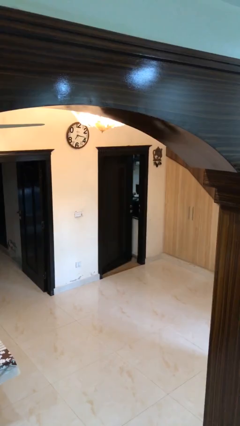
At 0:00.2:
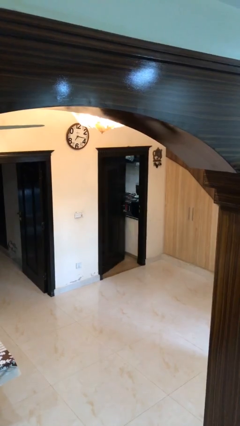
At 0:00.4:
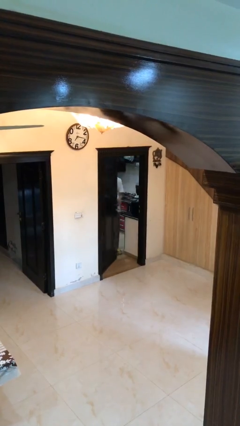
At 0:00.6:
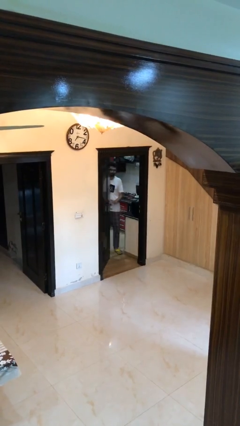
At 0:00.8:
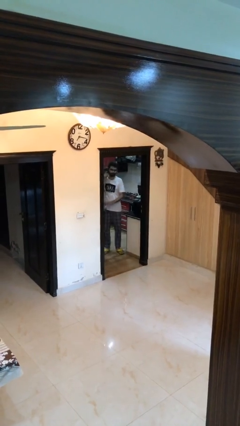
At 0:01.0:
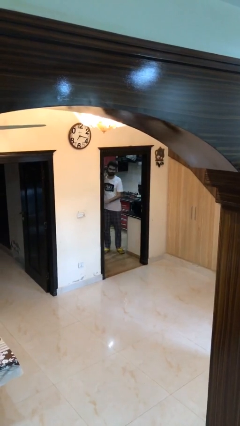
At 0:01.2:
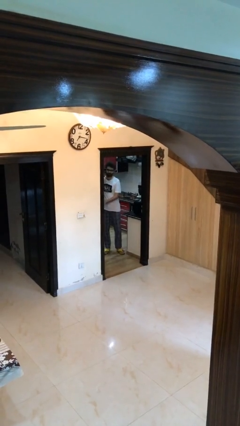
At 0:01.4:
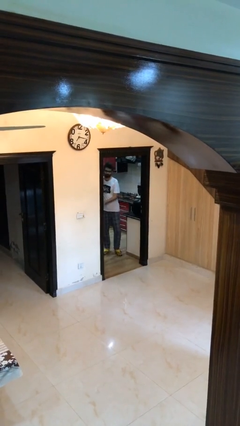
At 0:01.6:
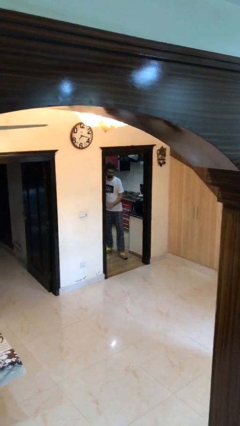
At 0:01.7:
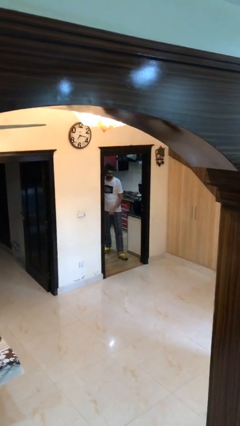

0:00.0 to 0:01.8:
person opens facility door

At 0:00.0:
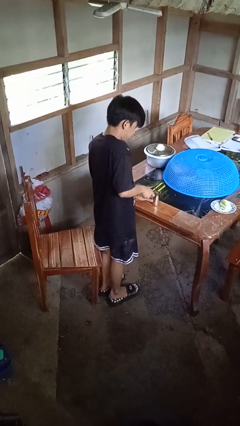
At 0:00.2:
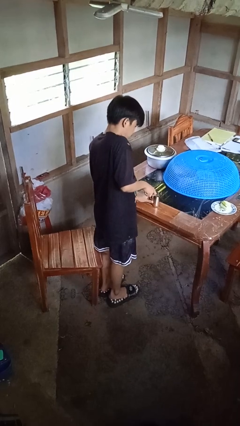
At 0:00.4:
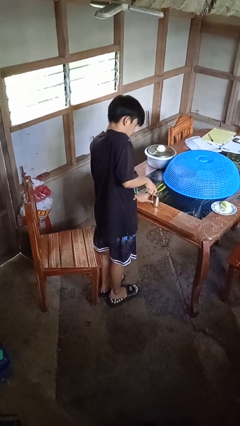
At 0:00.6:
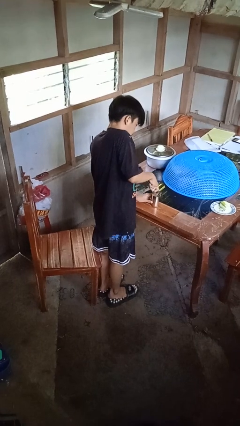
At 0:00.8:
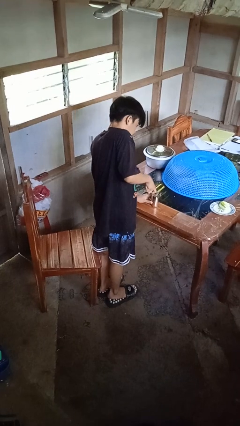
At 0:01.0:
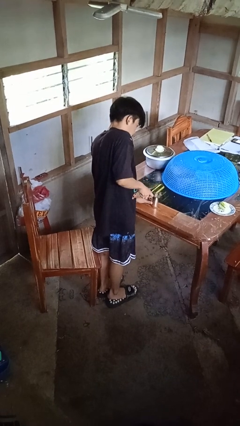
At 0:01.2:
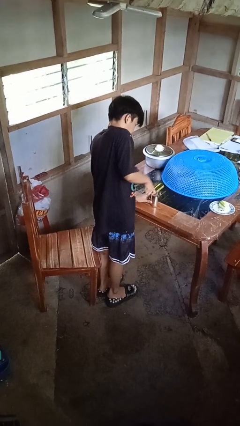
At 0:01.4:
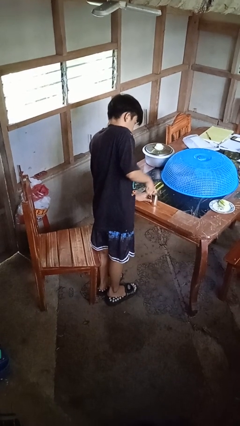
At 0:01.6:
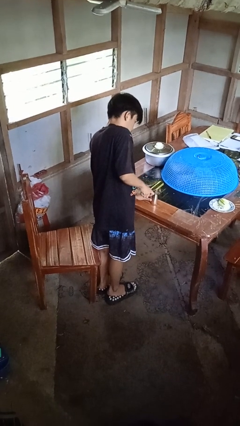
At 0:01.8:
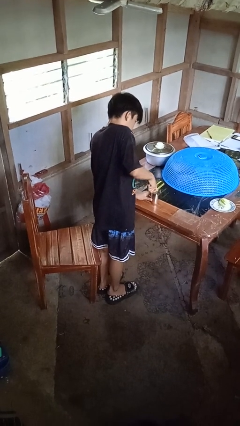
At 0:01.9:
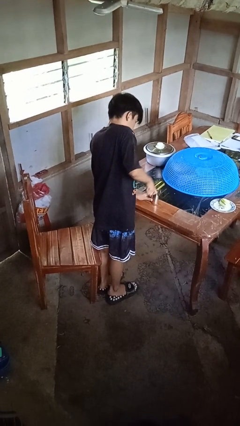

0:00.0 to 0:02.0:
person opens can with can opener

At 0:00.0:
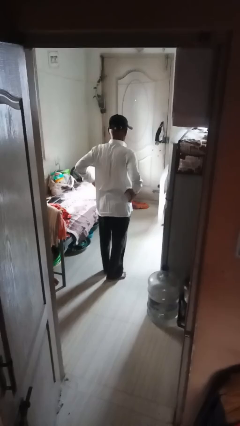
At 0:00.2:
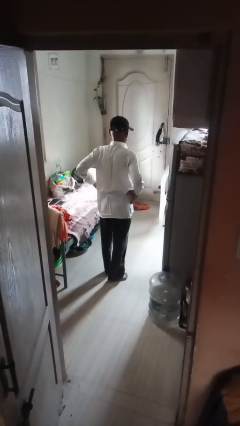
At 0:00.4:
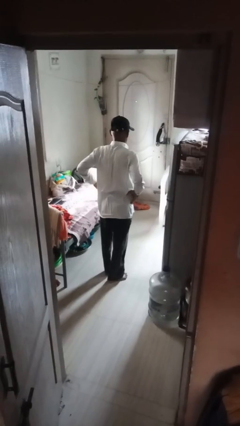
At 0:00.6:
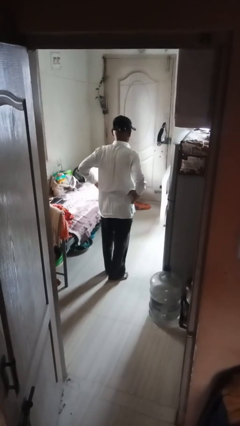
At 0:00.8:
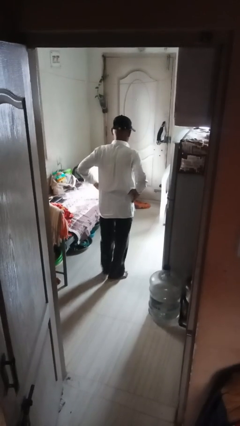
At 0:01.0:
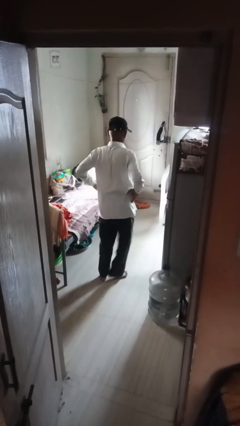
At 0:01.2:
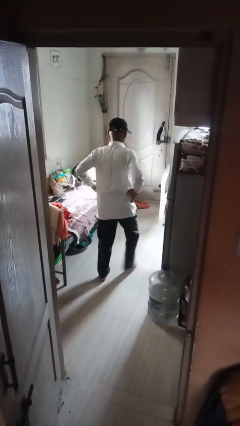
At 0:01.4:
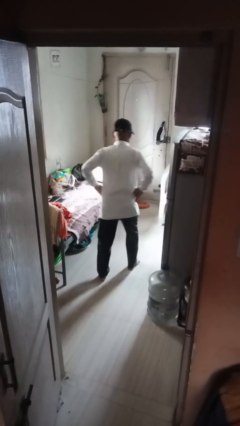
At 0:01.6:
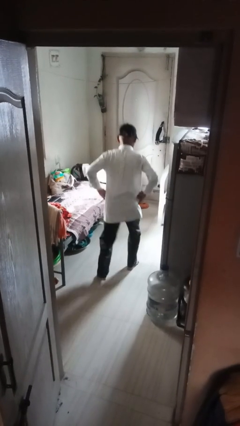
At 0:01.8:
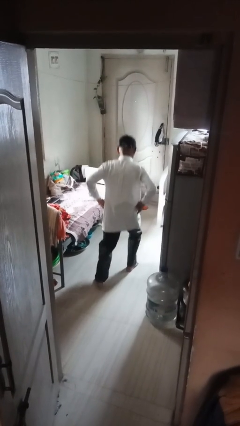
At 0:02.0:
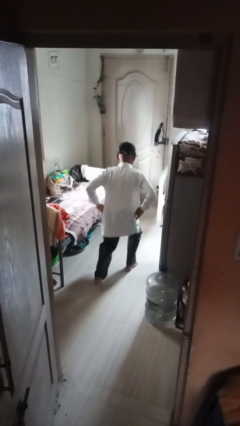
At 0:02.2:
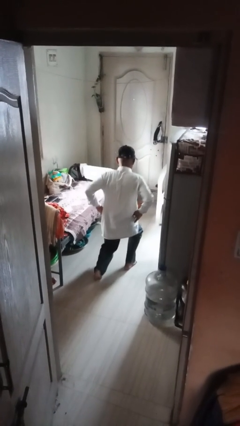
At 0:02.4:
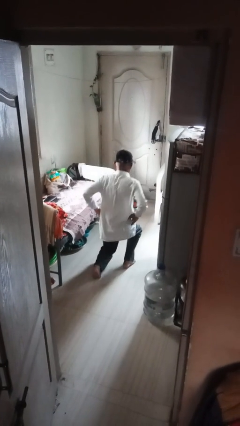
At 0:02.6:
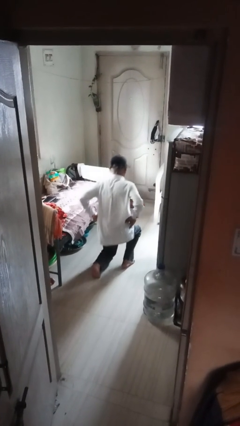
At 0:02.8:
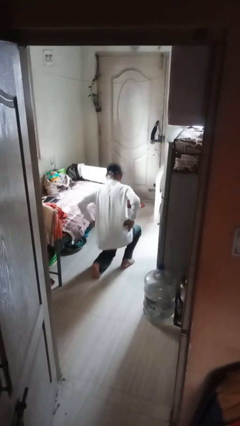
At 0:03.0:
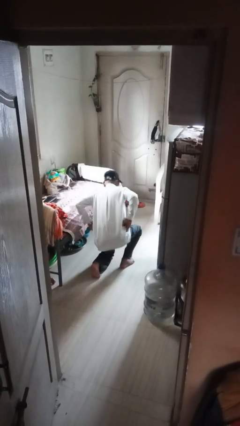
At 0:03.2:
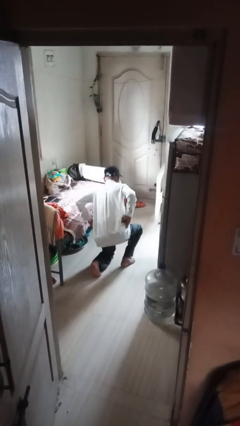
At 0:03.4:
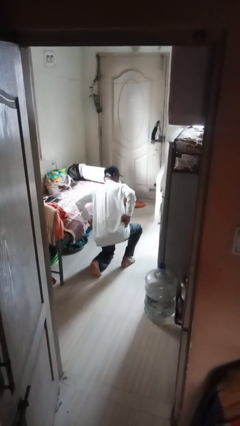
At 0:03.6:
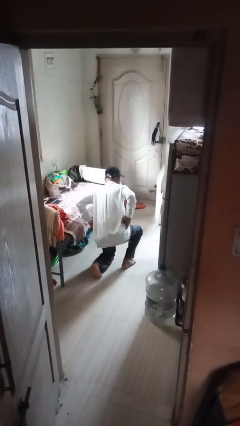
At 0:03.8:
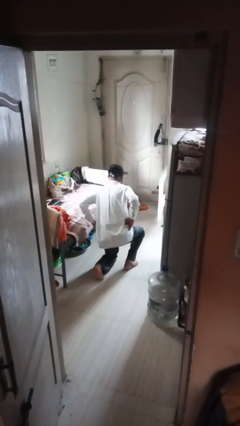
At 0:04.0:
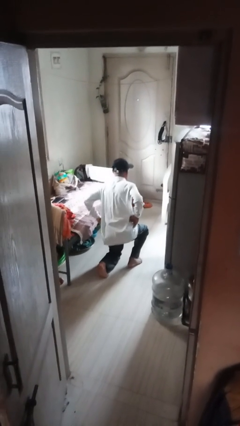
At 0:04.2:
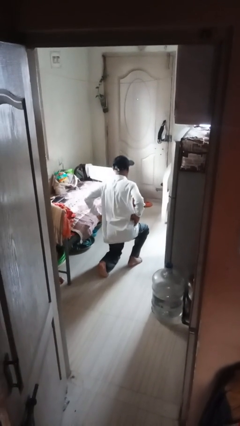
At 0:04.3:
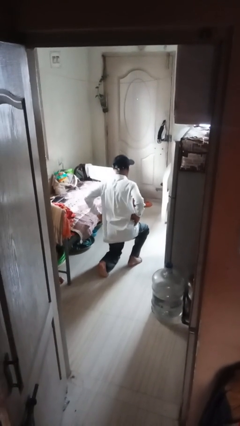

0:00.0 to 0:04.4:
person exercises with lunges

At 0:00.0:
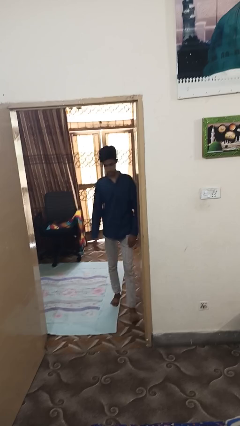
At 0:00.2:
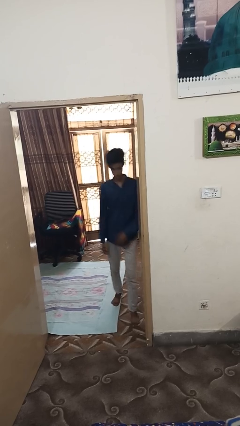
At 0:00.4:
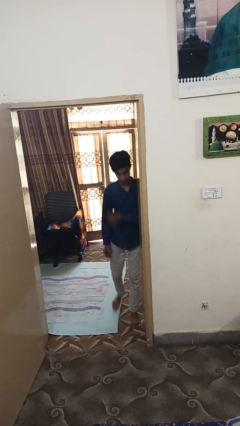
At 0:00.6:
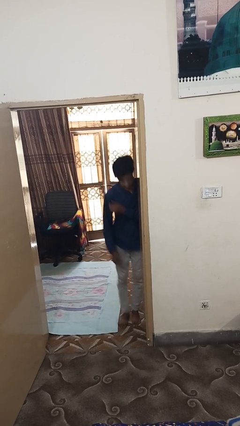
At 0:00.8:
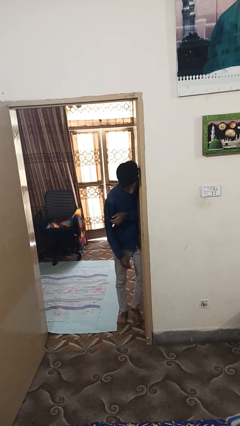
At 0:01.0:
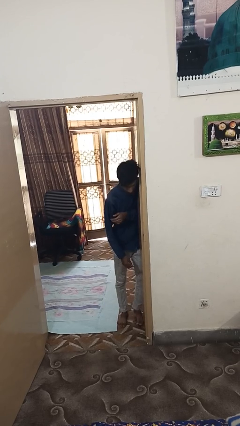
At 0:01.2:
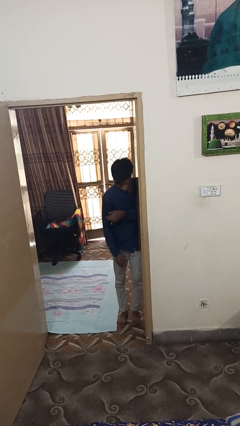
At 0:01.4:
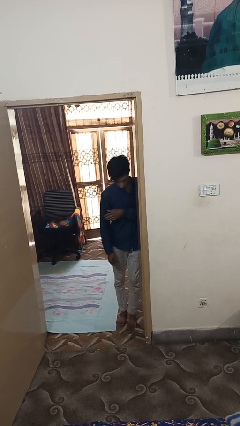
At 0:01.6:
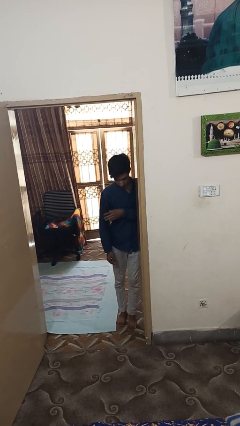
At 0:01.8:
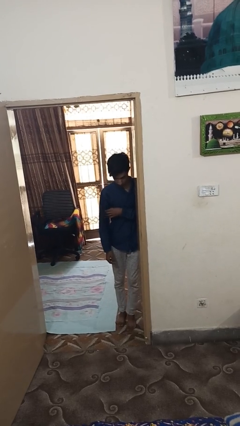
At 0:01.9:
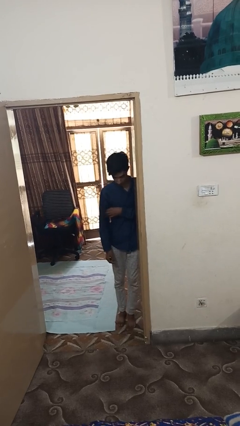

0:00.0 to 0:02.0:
person bumps into wall

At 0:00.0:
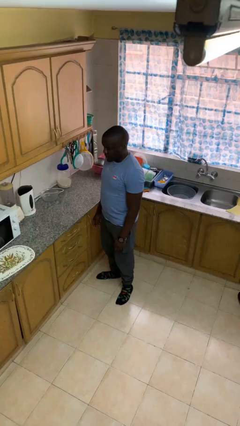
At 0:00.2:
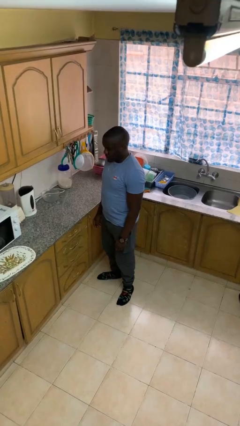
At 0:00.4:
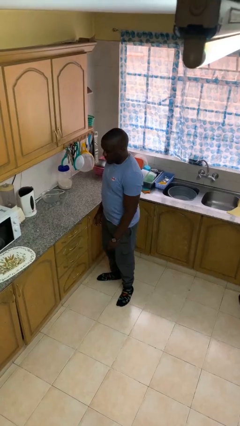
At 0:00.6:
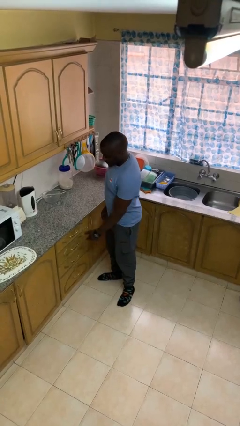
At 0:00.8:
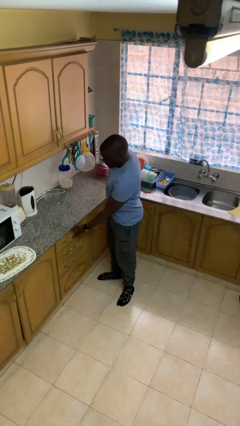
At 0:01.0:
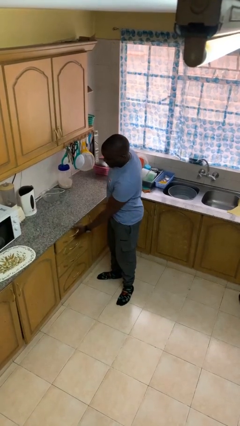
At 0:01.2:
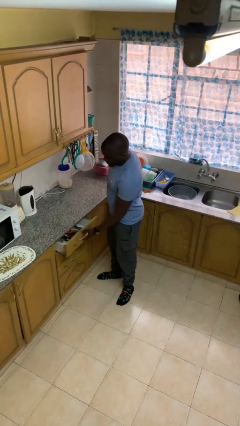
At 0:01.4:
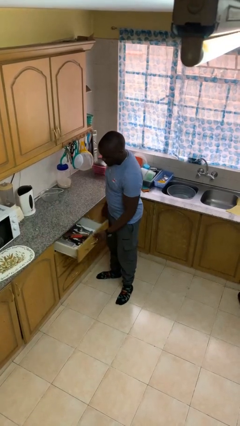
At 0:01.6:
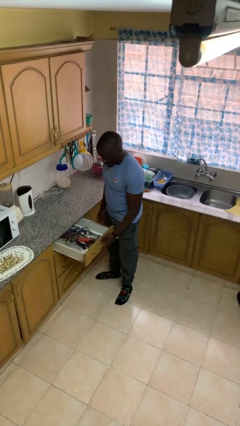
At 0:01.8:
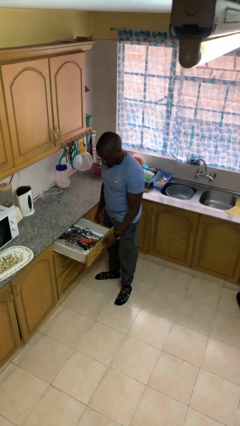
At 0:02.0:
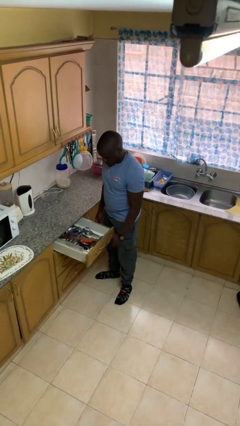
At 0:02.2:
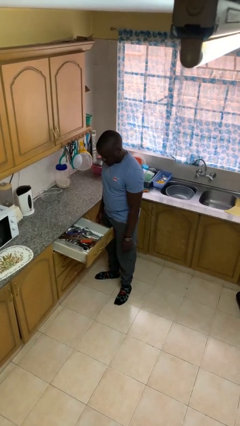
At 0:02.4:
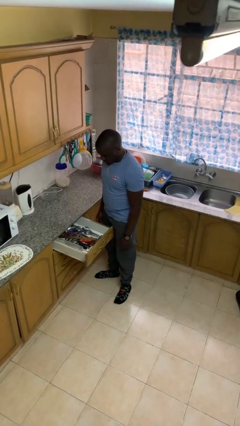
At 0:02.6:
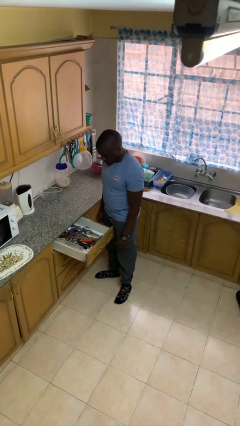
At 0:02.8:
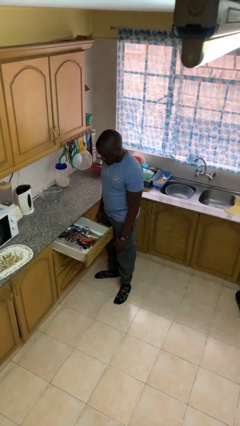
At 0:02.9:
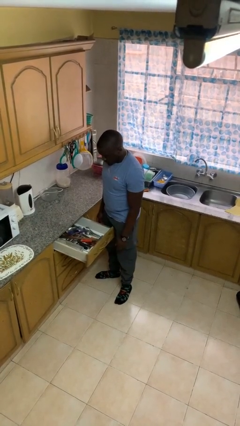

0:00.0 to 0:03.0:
person opens kitchen drawer

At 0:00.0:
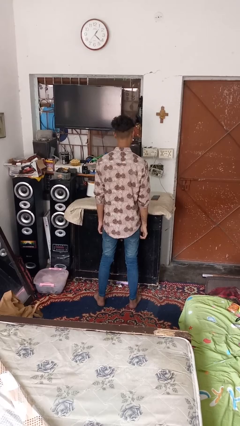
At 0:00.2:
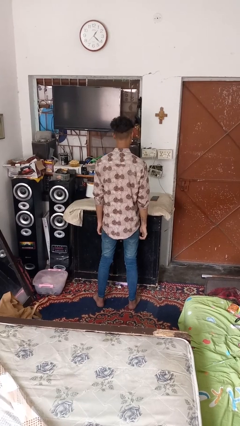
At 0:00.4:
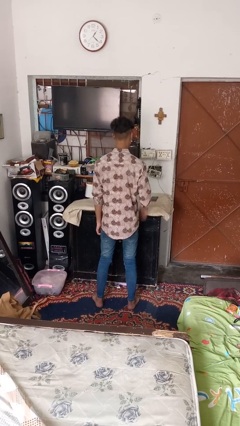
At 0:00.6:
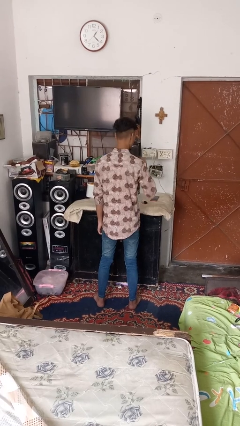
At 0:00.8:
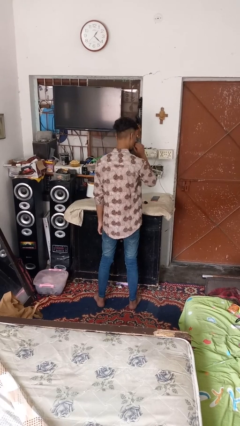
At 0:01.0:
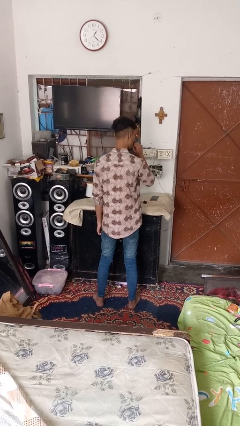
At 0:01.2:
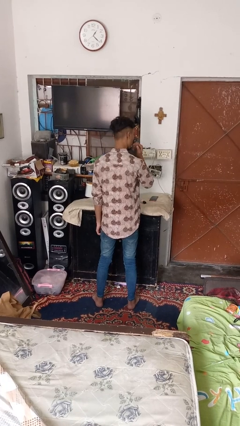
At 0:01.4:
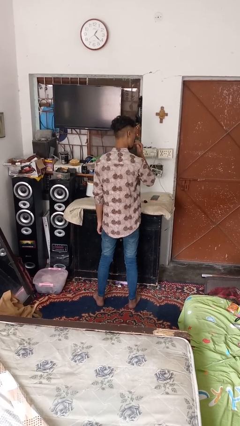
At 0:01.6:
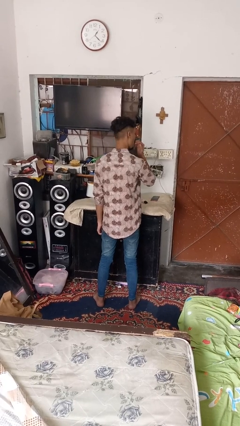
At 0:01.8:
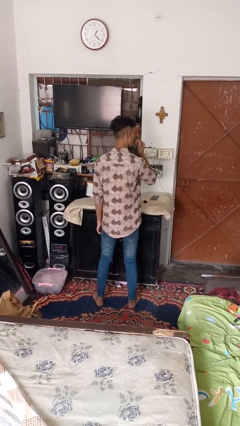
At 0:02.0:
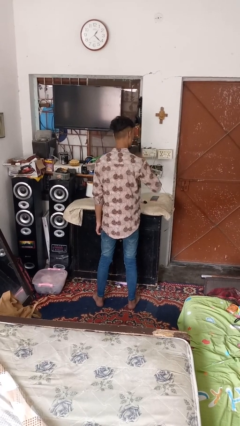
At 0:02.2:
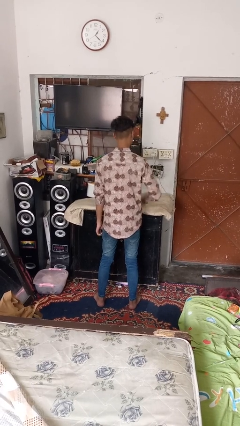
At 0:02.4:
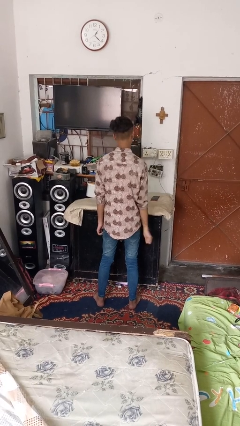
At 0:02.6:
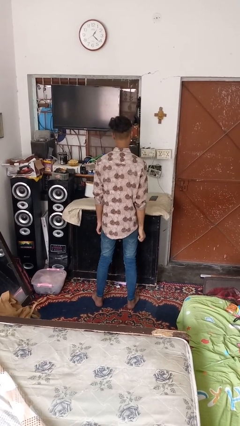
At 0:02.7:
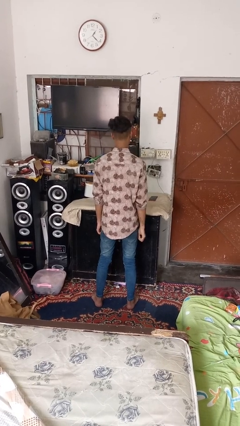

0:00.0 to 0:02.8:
person licks fingers

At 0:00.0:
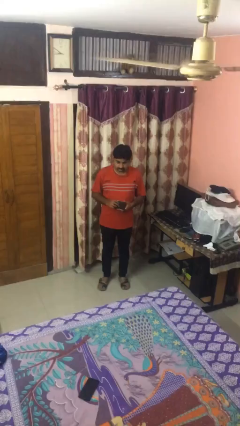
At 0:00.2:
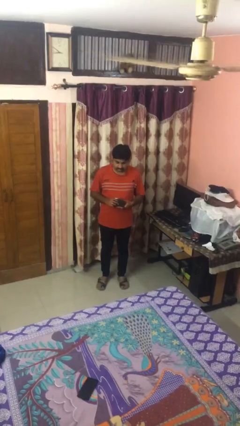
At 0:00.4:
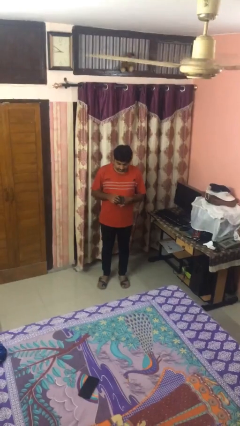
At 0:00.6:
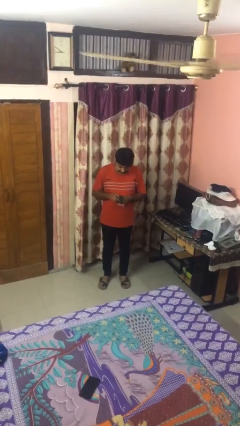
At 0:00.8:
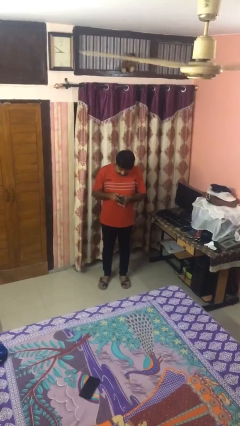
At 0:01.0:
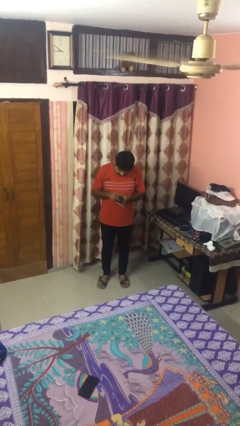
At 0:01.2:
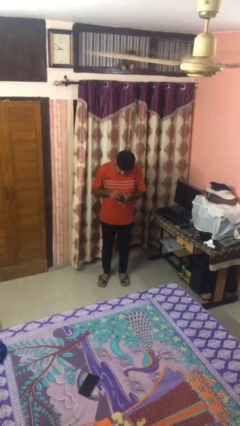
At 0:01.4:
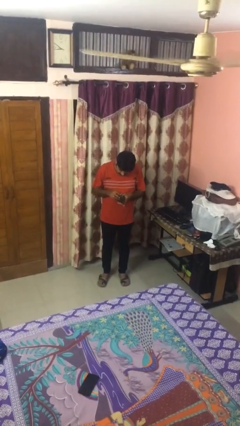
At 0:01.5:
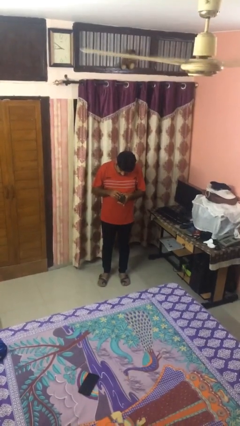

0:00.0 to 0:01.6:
person searches in purse
